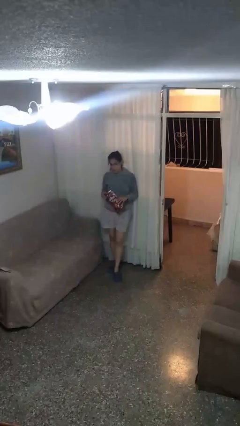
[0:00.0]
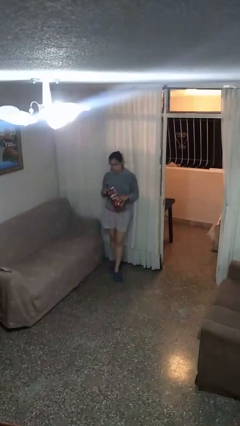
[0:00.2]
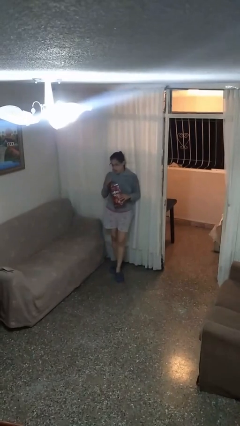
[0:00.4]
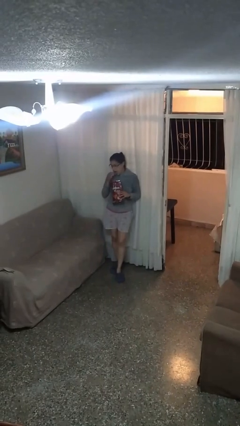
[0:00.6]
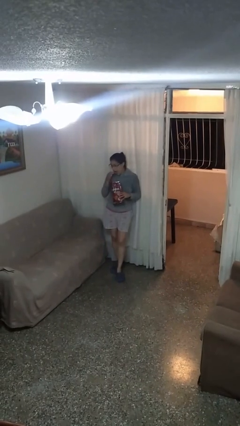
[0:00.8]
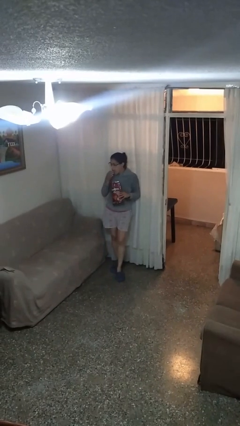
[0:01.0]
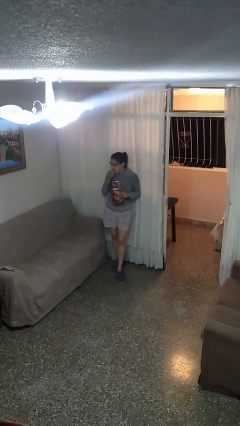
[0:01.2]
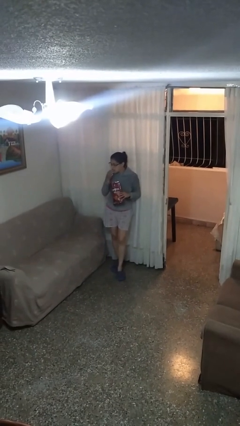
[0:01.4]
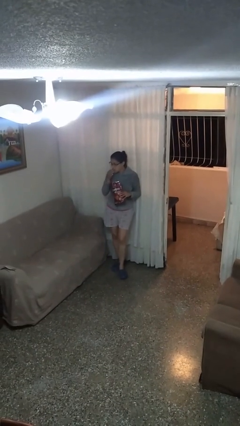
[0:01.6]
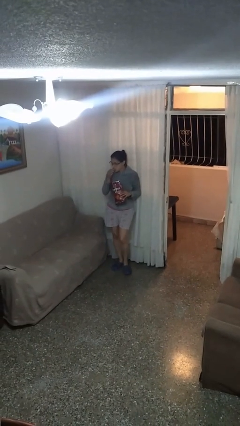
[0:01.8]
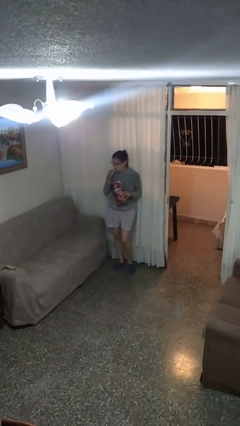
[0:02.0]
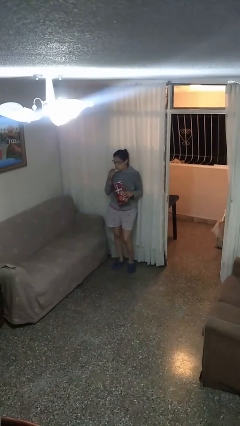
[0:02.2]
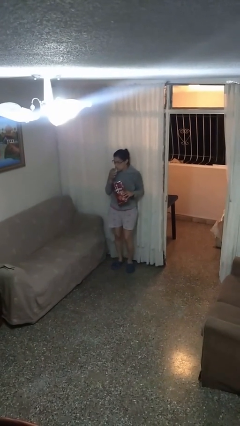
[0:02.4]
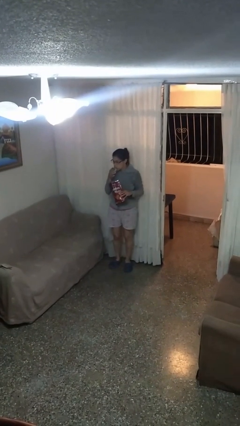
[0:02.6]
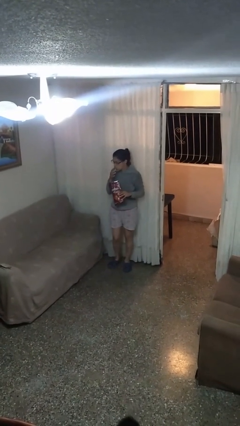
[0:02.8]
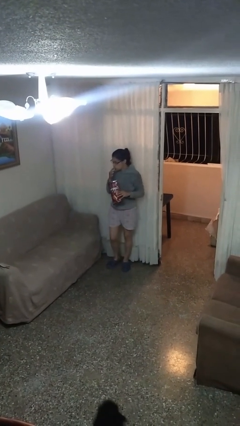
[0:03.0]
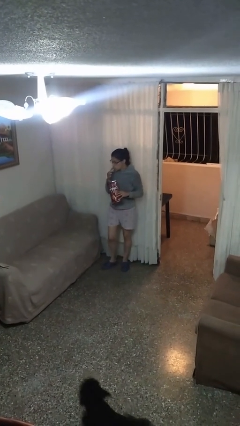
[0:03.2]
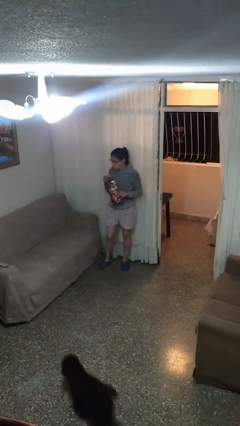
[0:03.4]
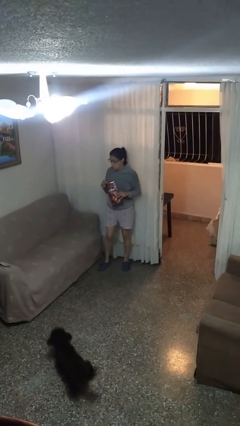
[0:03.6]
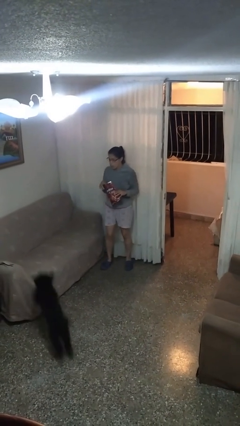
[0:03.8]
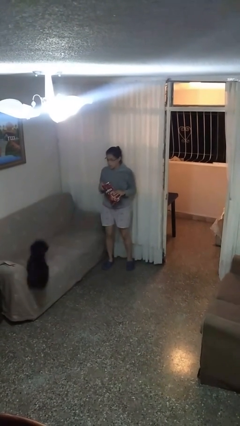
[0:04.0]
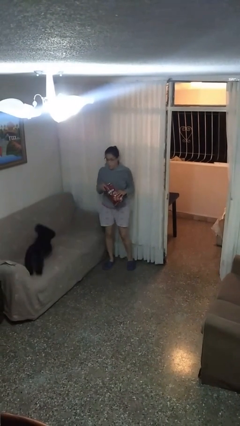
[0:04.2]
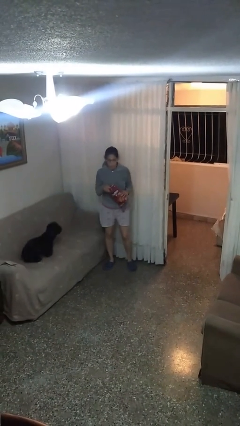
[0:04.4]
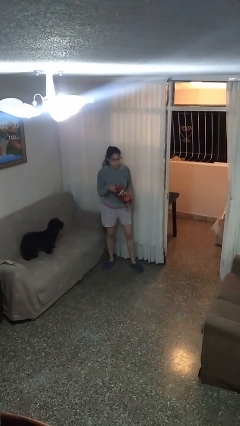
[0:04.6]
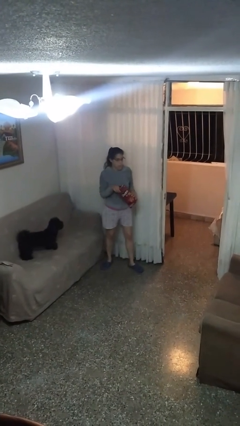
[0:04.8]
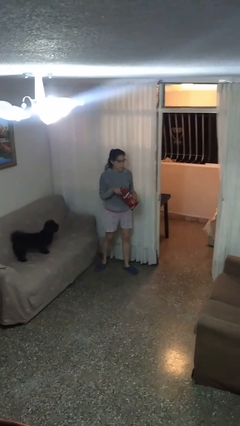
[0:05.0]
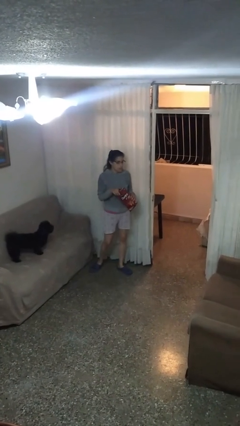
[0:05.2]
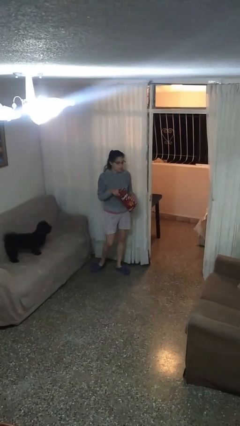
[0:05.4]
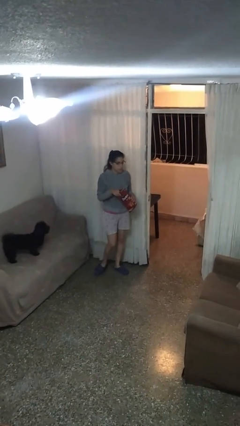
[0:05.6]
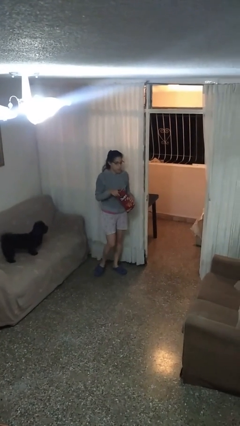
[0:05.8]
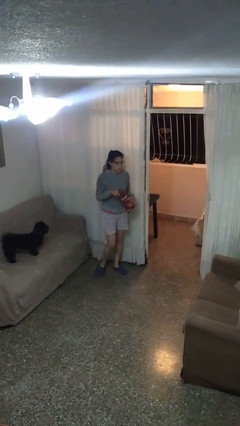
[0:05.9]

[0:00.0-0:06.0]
person eats snack from bag

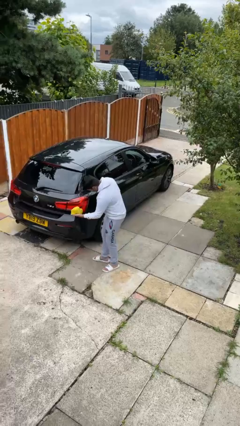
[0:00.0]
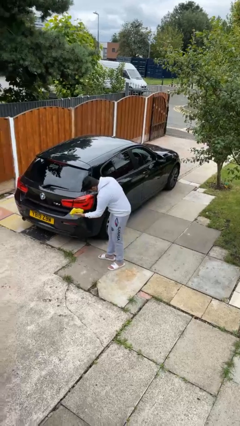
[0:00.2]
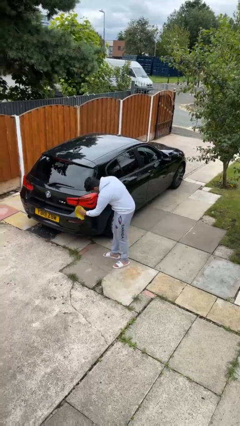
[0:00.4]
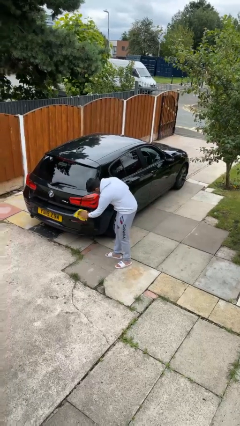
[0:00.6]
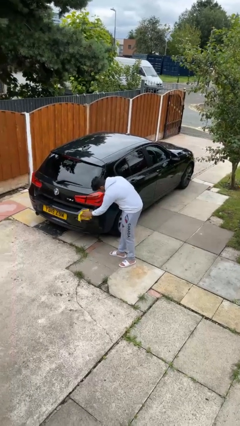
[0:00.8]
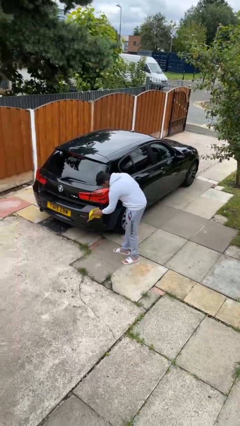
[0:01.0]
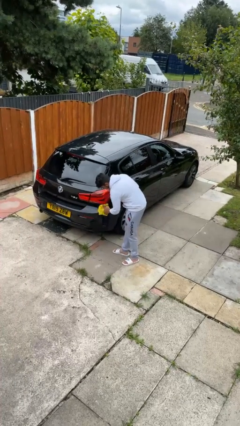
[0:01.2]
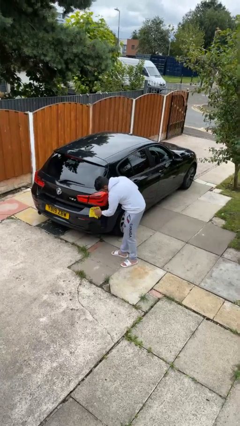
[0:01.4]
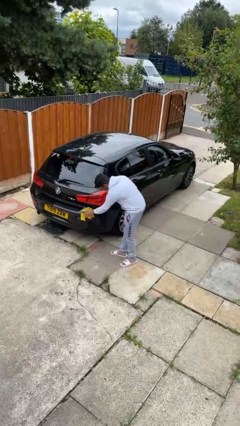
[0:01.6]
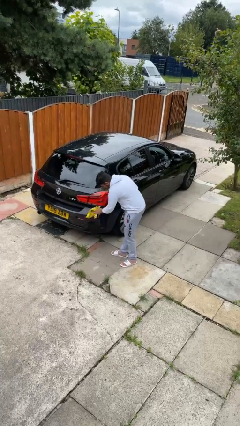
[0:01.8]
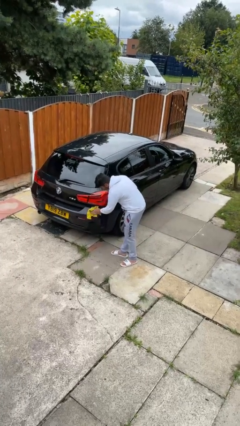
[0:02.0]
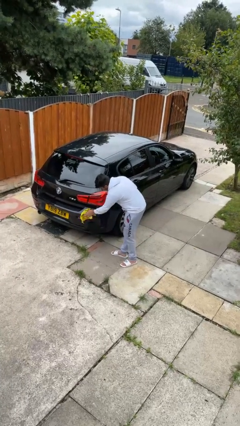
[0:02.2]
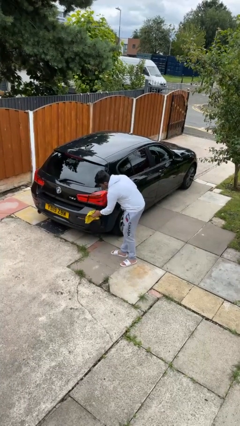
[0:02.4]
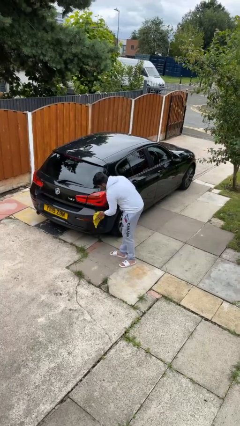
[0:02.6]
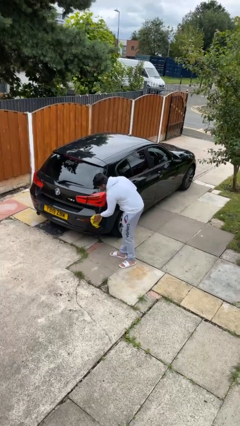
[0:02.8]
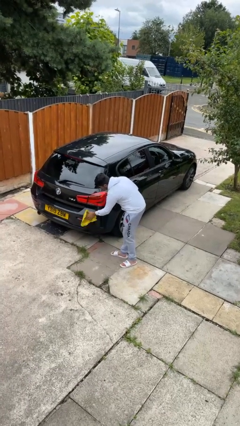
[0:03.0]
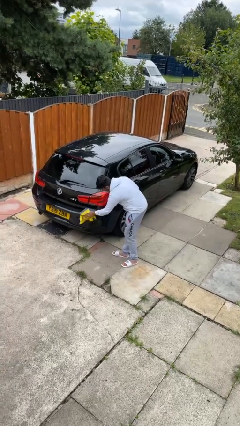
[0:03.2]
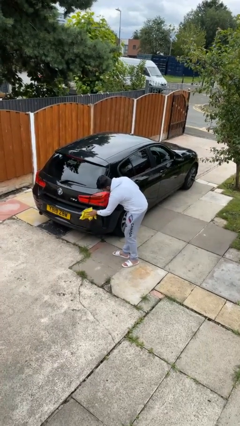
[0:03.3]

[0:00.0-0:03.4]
person polishes car with rag

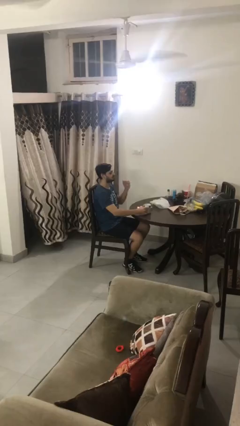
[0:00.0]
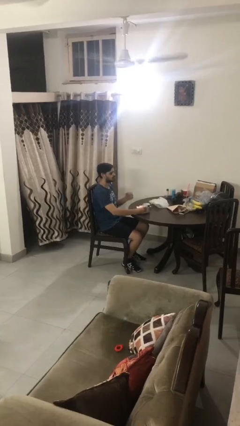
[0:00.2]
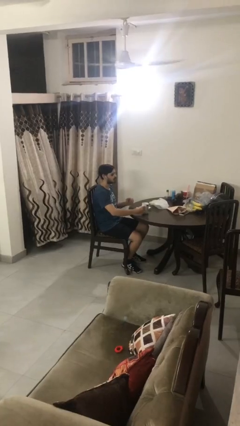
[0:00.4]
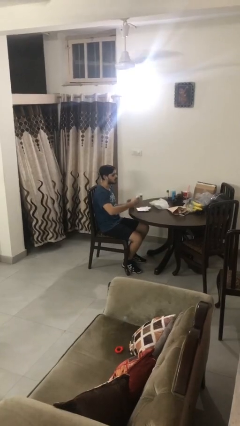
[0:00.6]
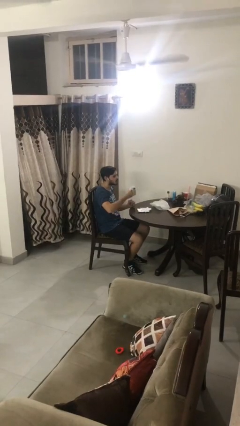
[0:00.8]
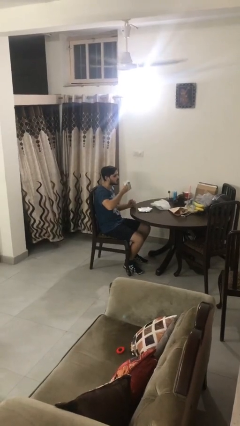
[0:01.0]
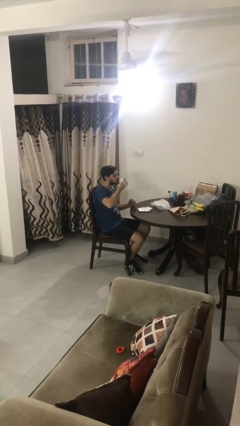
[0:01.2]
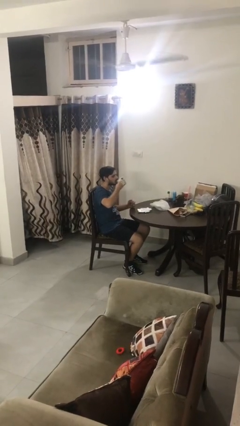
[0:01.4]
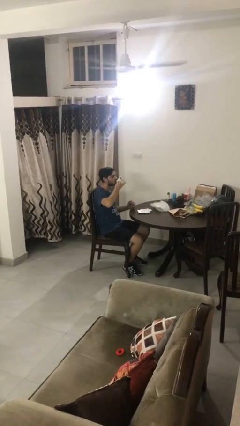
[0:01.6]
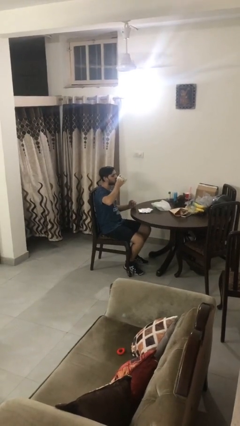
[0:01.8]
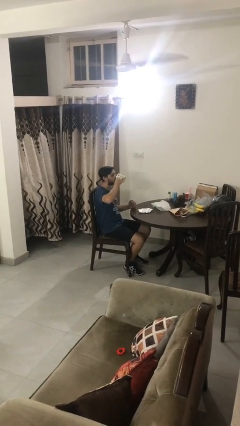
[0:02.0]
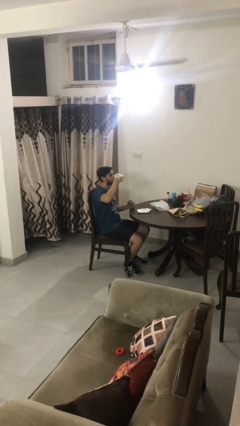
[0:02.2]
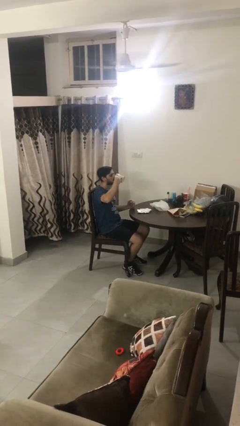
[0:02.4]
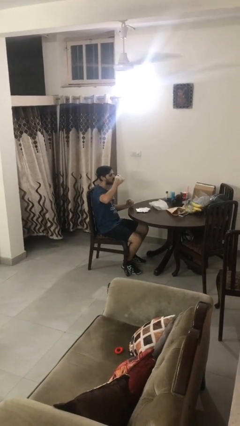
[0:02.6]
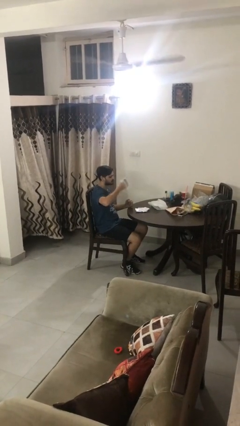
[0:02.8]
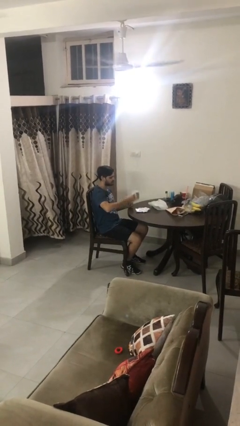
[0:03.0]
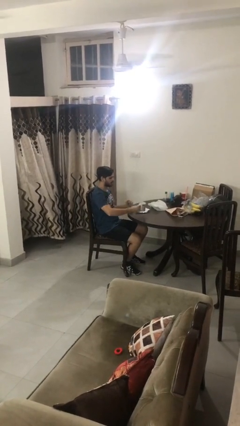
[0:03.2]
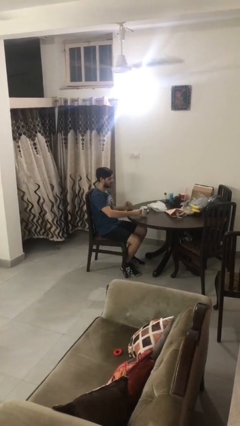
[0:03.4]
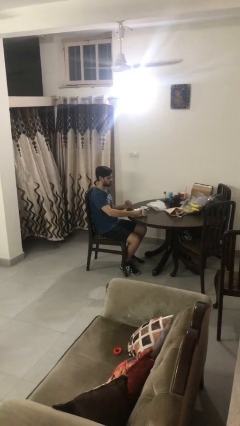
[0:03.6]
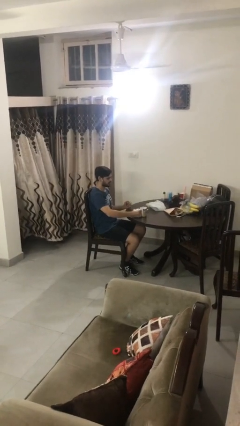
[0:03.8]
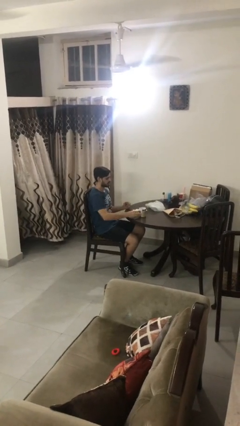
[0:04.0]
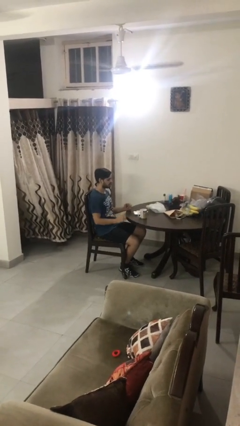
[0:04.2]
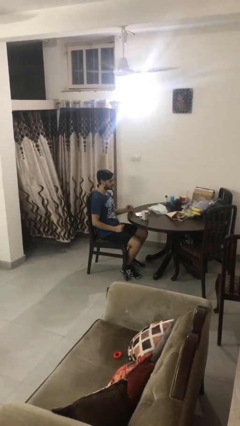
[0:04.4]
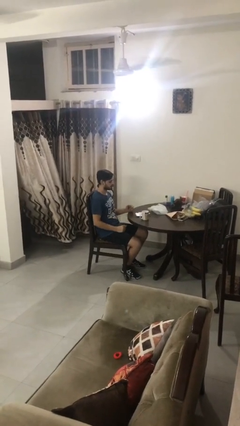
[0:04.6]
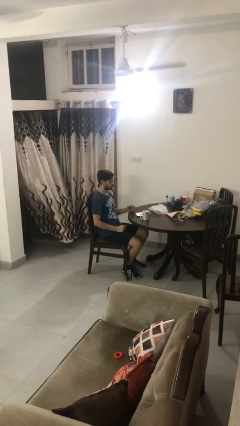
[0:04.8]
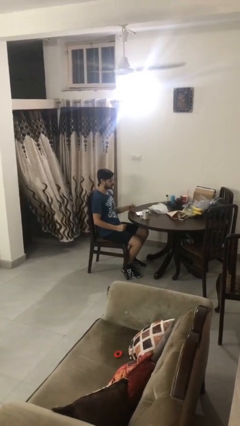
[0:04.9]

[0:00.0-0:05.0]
person drinks from cup

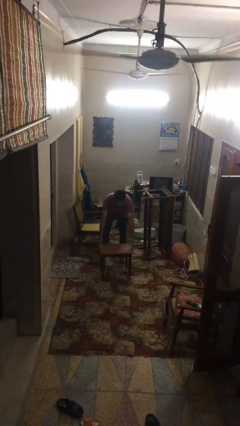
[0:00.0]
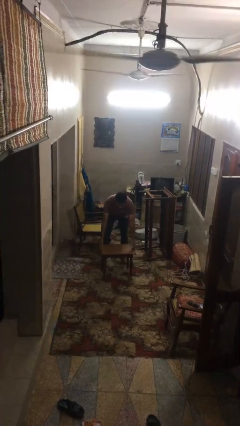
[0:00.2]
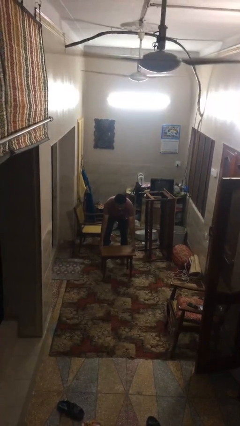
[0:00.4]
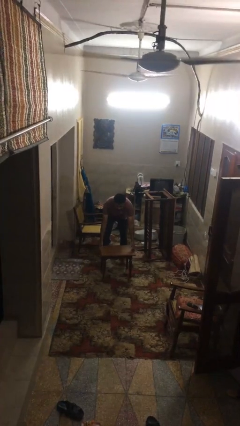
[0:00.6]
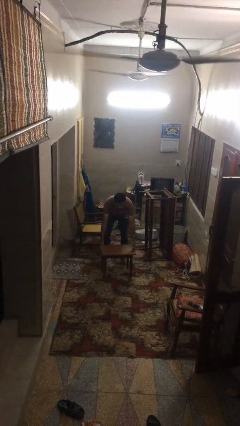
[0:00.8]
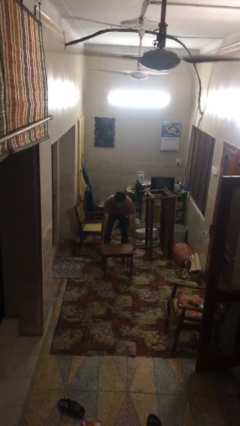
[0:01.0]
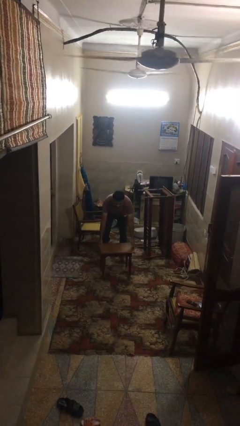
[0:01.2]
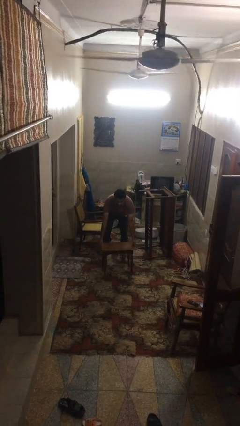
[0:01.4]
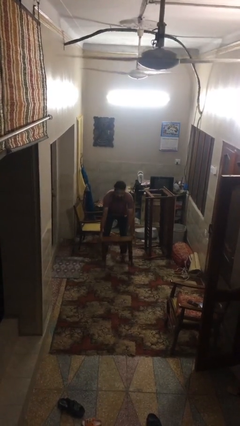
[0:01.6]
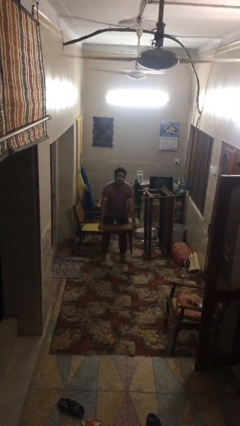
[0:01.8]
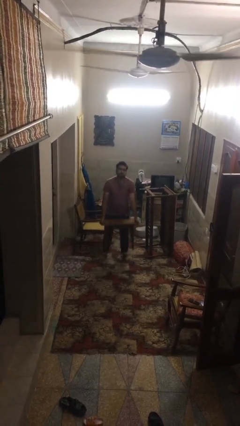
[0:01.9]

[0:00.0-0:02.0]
person picks up object from floor

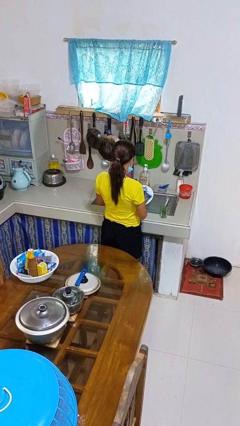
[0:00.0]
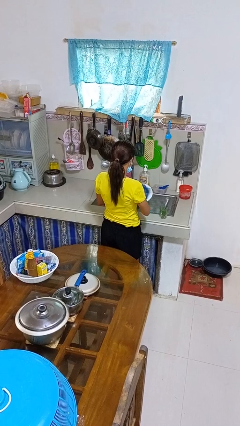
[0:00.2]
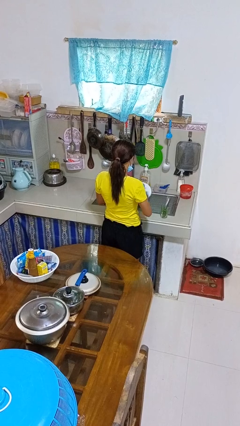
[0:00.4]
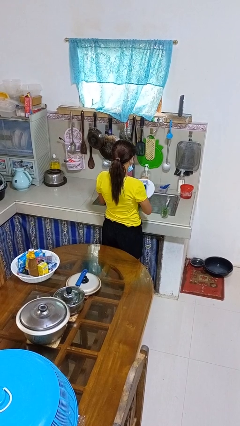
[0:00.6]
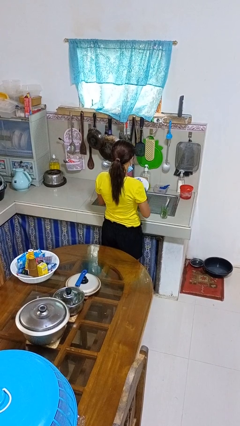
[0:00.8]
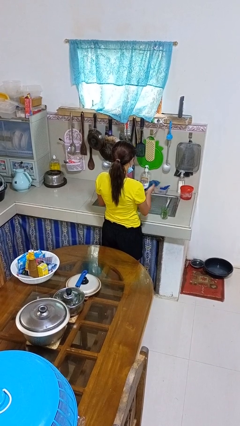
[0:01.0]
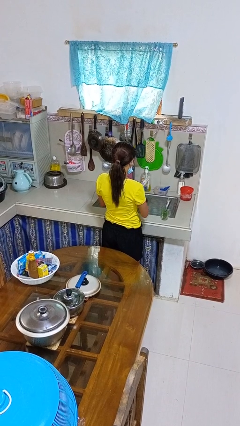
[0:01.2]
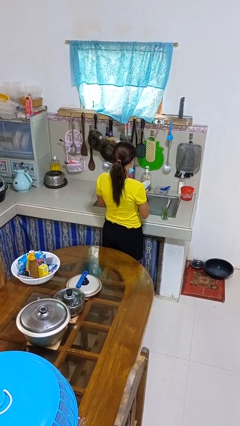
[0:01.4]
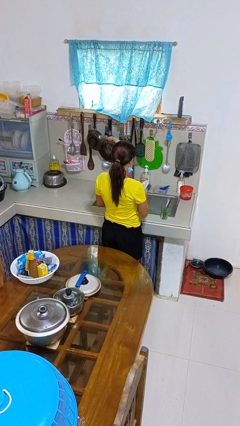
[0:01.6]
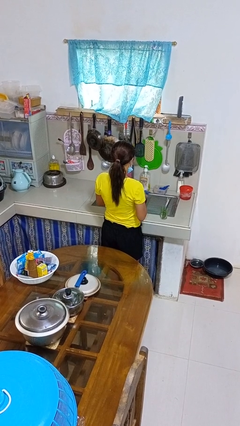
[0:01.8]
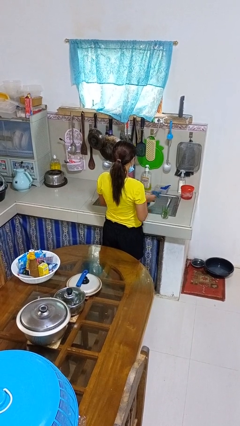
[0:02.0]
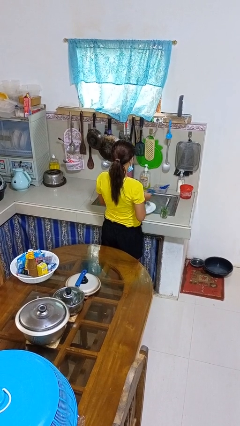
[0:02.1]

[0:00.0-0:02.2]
person dries dish
